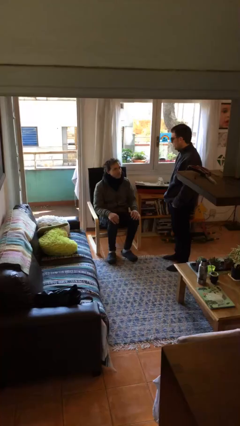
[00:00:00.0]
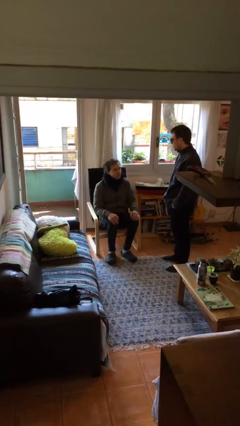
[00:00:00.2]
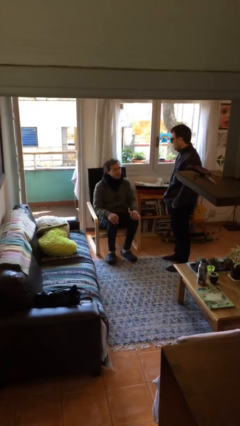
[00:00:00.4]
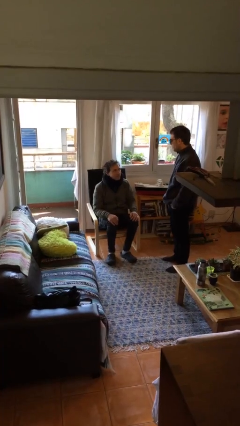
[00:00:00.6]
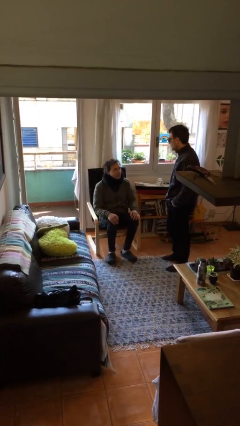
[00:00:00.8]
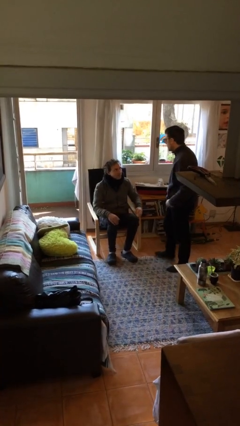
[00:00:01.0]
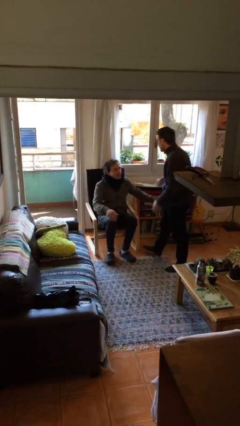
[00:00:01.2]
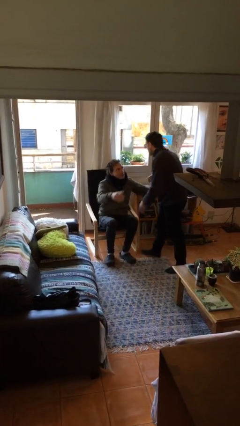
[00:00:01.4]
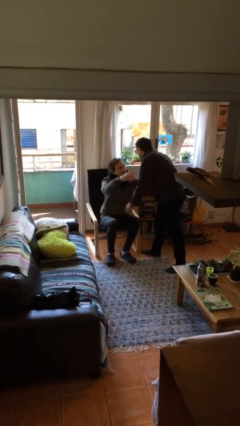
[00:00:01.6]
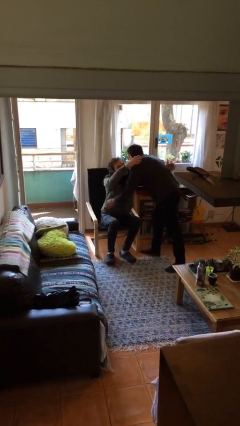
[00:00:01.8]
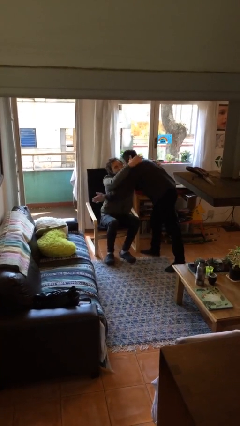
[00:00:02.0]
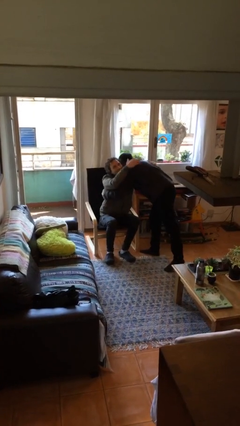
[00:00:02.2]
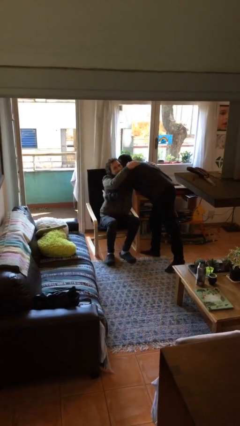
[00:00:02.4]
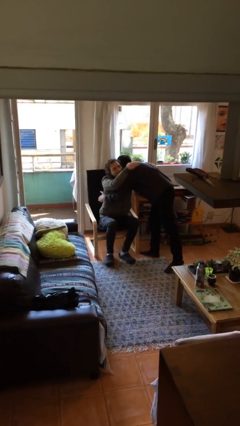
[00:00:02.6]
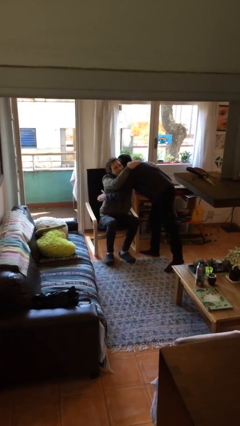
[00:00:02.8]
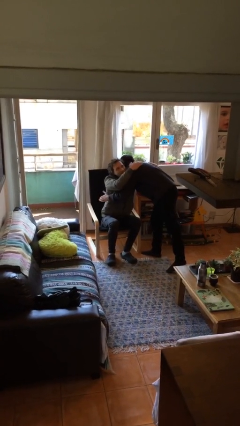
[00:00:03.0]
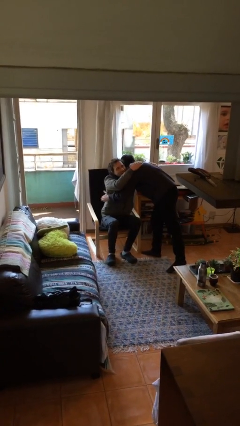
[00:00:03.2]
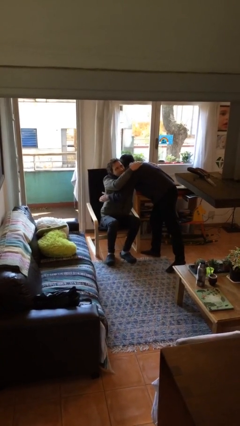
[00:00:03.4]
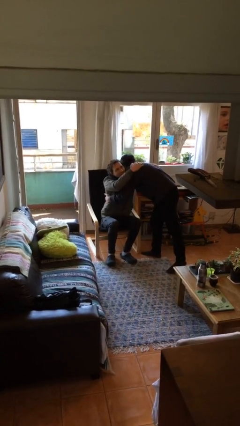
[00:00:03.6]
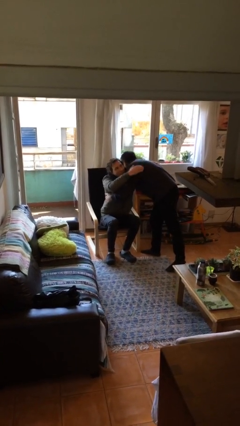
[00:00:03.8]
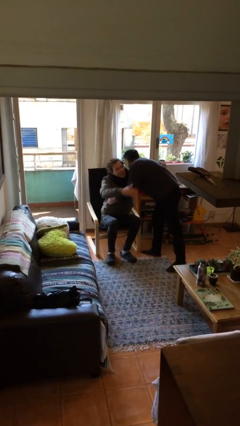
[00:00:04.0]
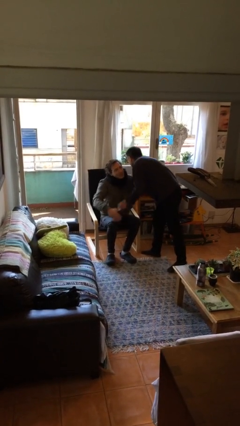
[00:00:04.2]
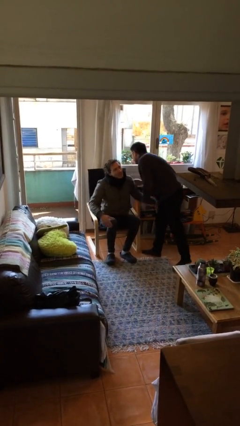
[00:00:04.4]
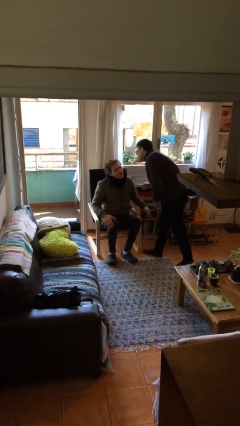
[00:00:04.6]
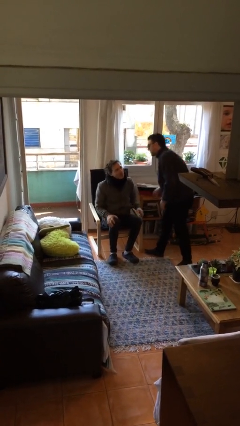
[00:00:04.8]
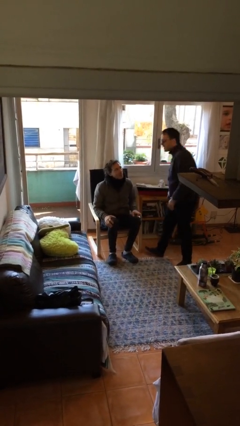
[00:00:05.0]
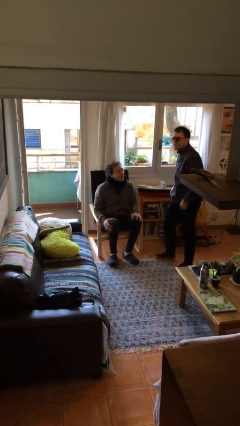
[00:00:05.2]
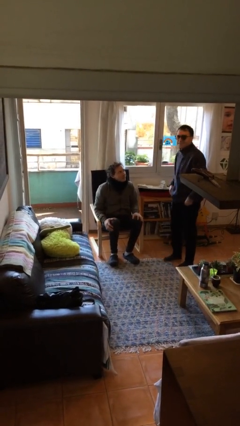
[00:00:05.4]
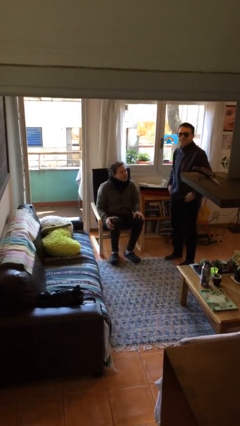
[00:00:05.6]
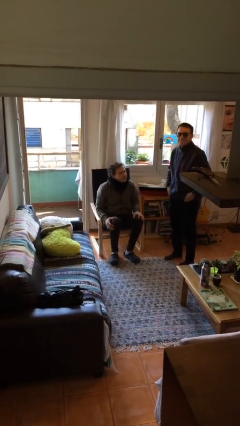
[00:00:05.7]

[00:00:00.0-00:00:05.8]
person embraces person

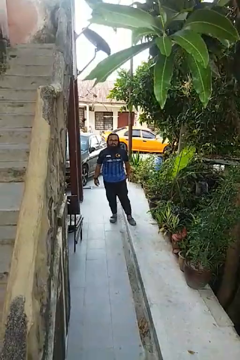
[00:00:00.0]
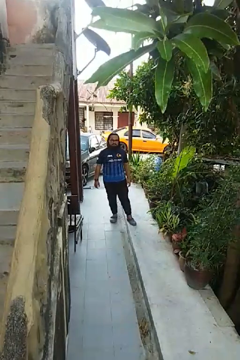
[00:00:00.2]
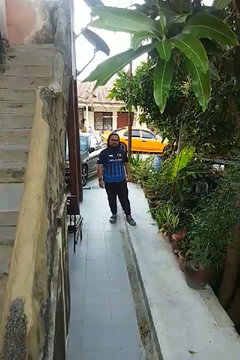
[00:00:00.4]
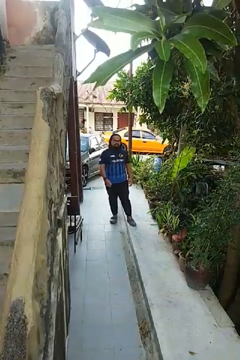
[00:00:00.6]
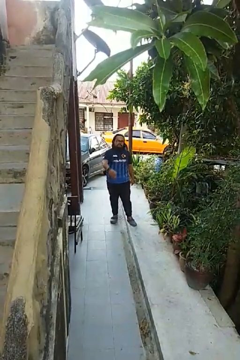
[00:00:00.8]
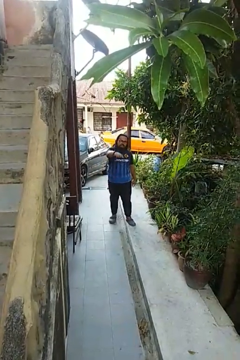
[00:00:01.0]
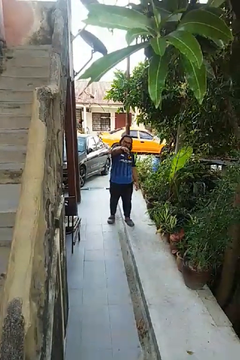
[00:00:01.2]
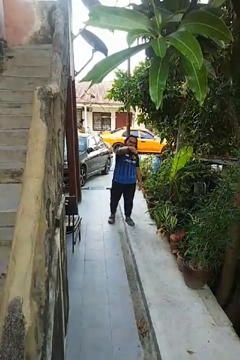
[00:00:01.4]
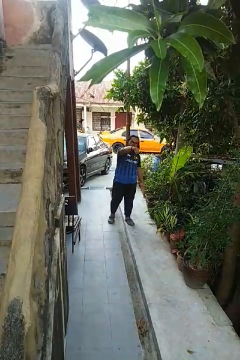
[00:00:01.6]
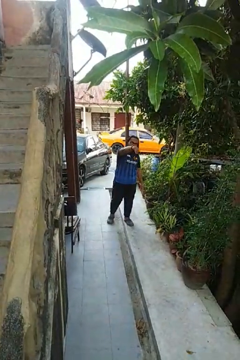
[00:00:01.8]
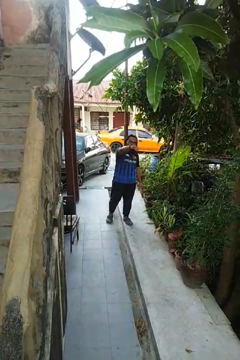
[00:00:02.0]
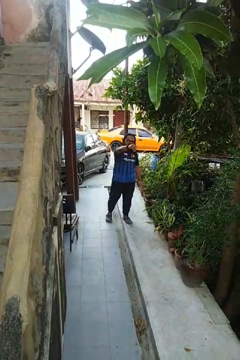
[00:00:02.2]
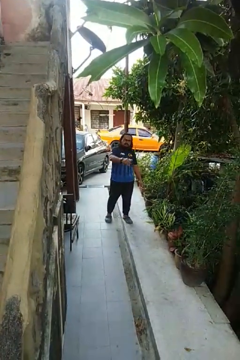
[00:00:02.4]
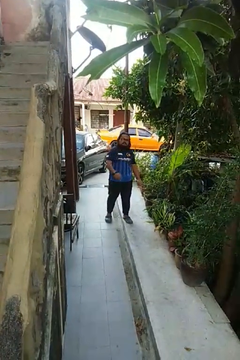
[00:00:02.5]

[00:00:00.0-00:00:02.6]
person gestures come here

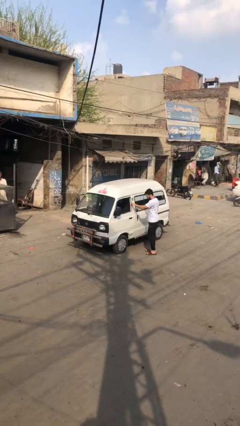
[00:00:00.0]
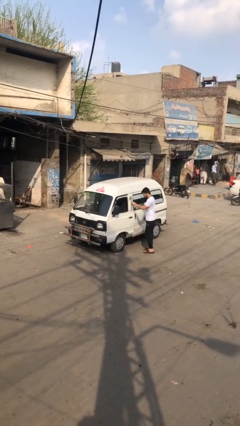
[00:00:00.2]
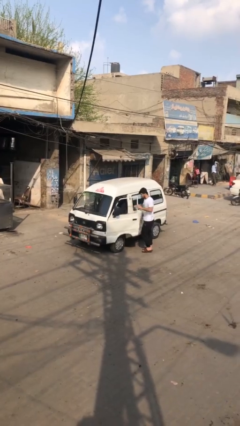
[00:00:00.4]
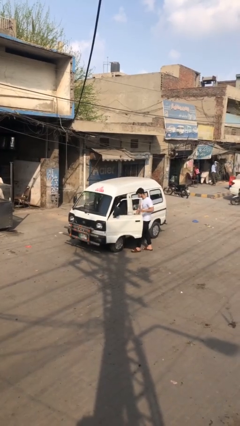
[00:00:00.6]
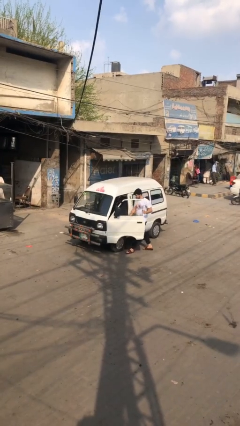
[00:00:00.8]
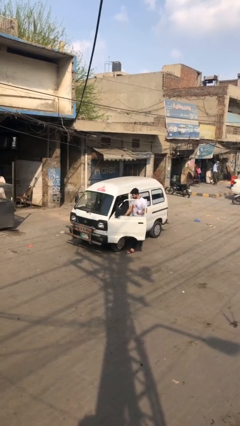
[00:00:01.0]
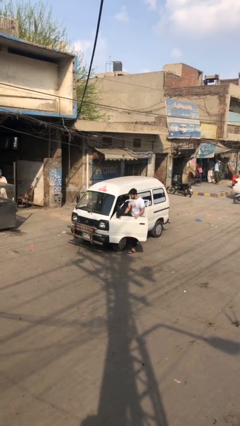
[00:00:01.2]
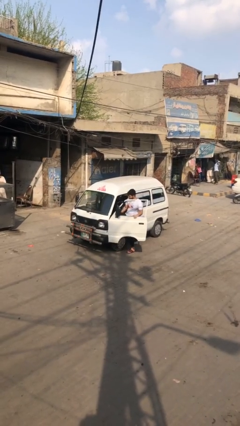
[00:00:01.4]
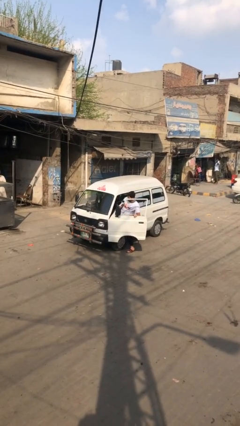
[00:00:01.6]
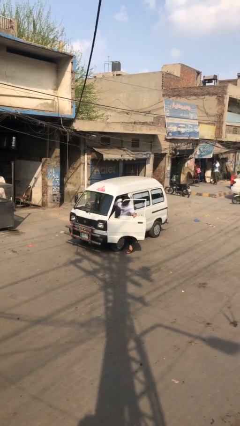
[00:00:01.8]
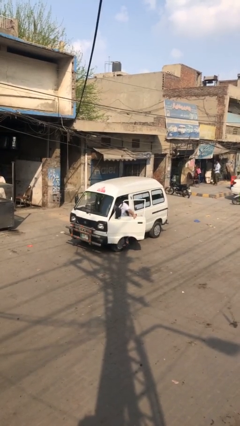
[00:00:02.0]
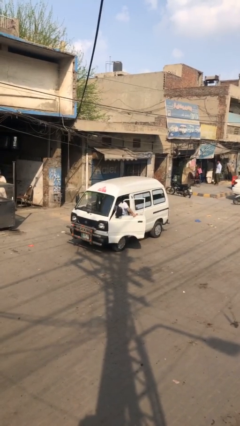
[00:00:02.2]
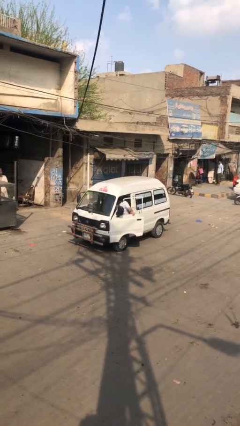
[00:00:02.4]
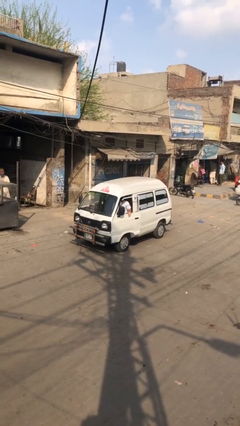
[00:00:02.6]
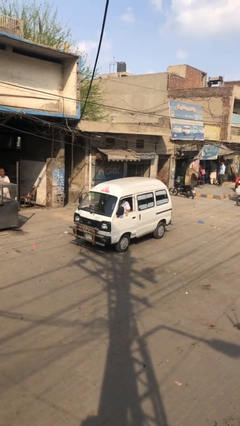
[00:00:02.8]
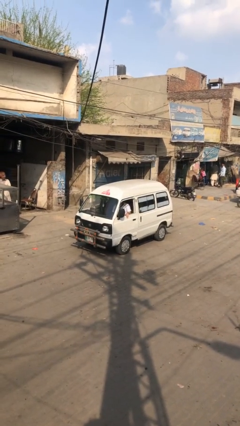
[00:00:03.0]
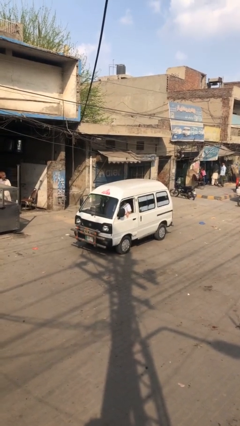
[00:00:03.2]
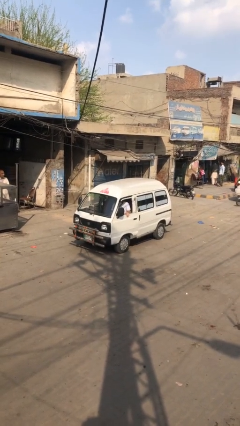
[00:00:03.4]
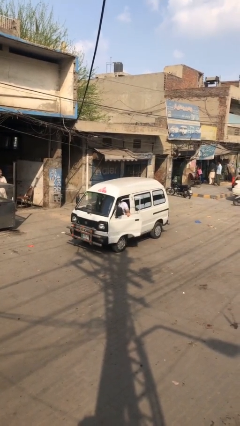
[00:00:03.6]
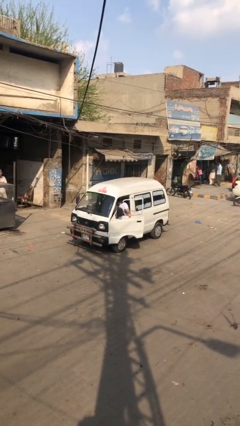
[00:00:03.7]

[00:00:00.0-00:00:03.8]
car picks up person

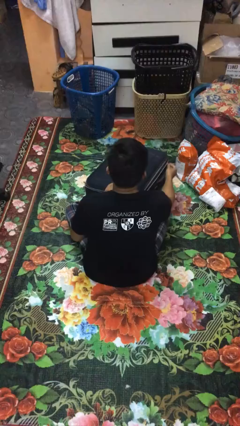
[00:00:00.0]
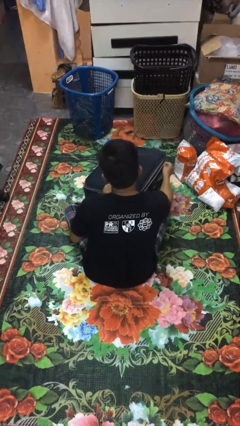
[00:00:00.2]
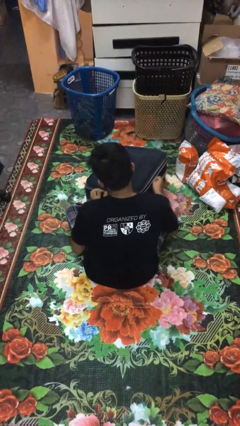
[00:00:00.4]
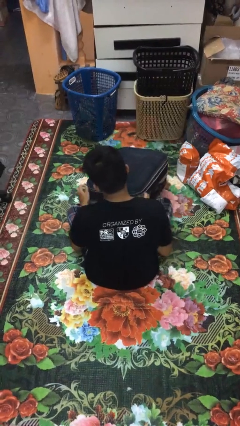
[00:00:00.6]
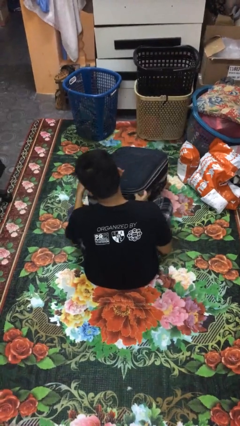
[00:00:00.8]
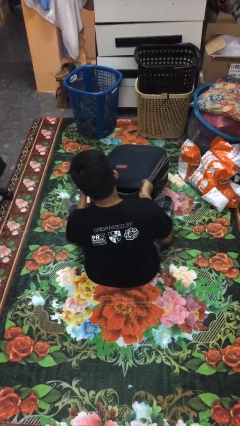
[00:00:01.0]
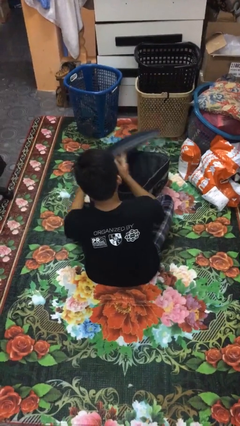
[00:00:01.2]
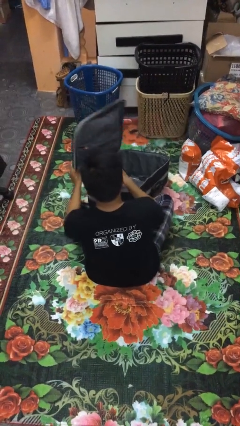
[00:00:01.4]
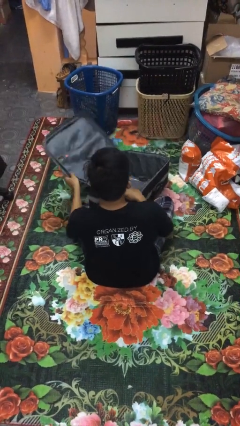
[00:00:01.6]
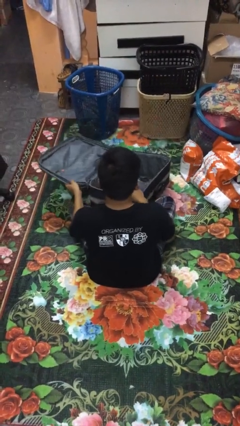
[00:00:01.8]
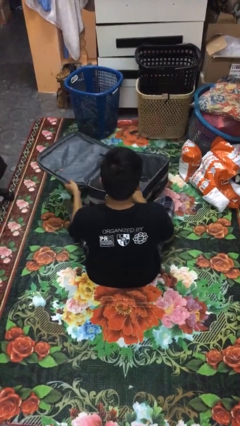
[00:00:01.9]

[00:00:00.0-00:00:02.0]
person opens suitcase

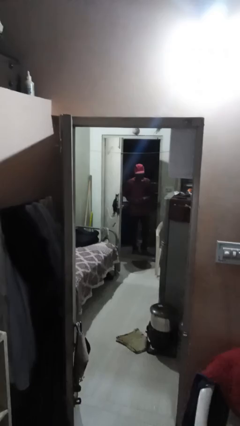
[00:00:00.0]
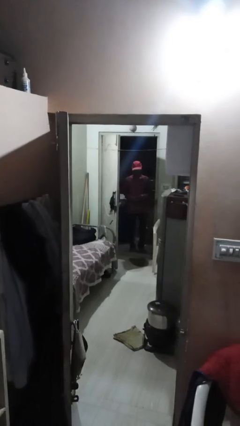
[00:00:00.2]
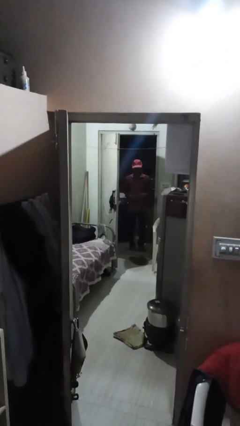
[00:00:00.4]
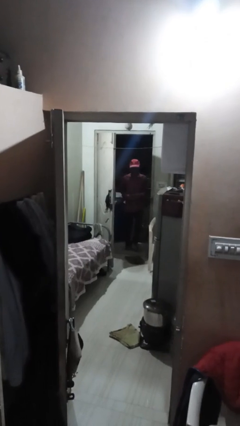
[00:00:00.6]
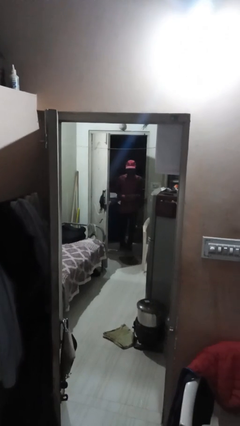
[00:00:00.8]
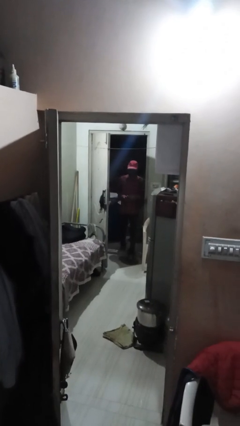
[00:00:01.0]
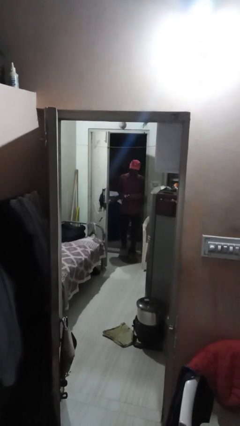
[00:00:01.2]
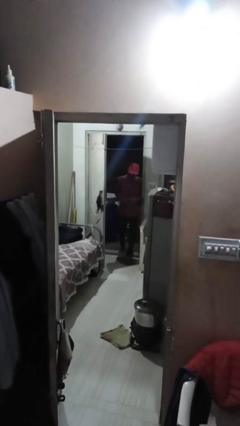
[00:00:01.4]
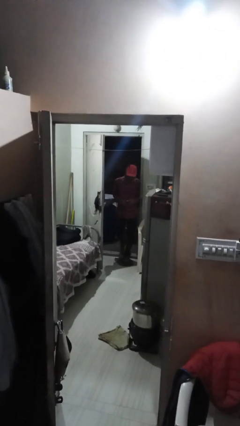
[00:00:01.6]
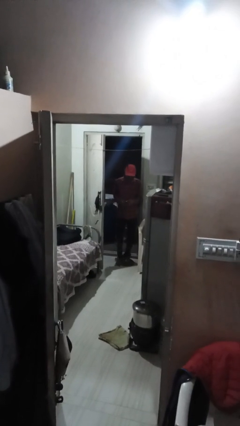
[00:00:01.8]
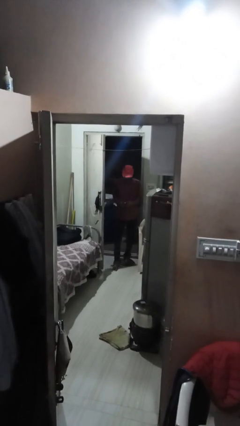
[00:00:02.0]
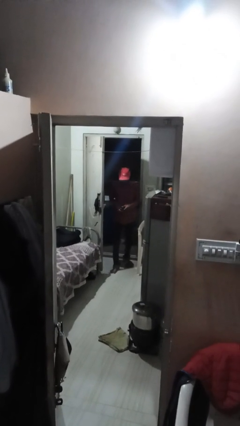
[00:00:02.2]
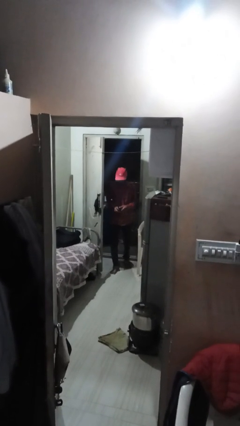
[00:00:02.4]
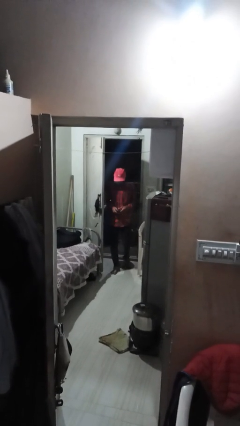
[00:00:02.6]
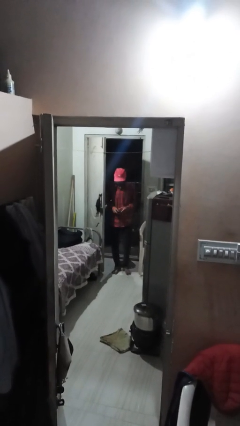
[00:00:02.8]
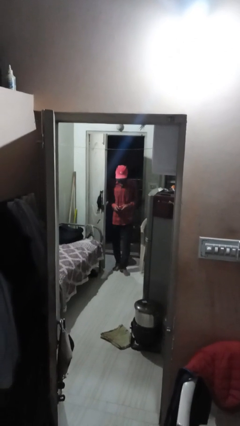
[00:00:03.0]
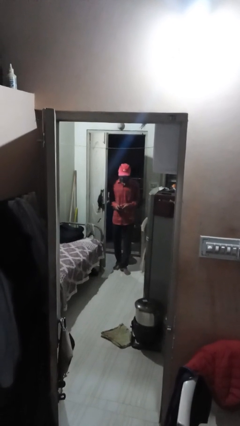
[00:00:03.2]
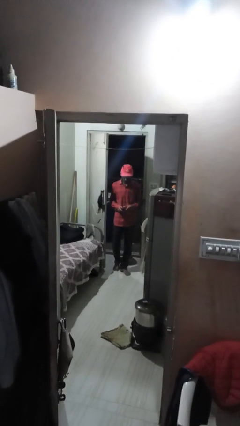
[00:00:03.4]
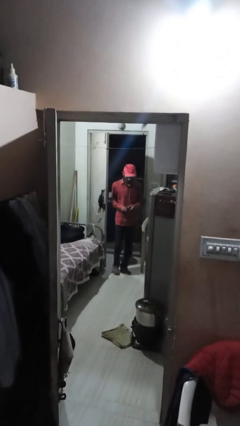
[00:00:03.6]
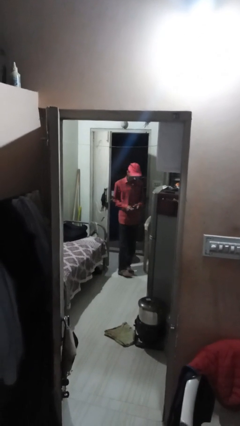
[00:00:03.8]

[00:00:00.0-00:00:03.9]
person enters scene through structure
